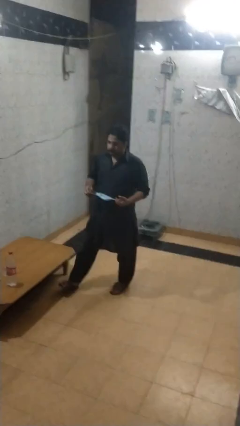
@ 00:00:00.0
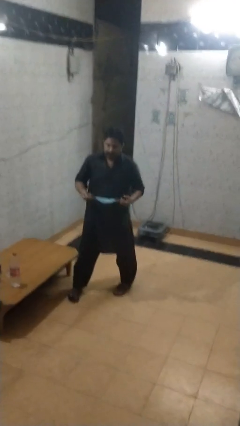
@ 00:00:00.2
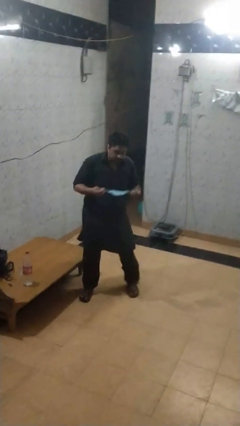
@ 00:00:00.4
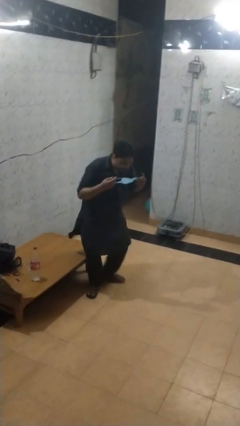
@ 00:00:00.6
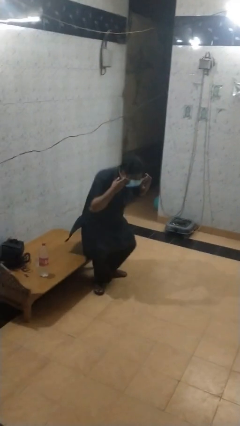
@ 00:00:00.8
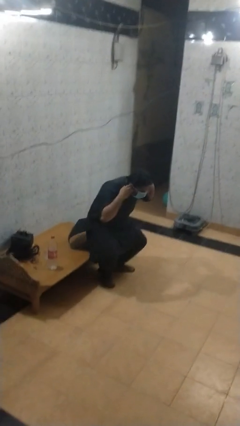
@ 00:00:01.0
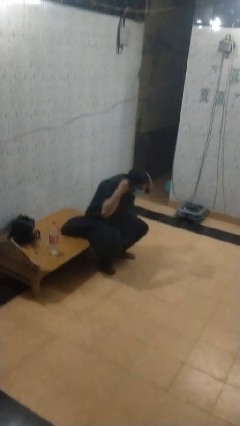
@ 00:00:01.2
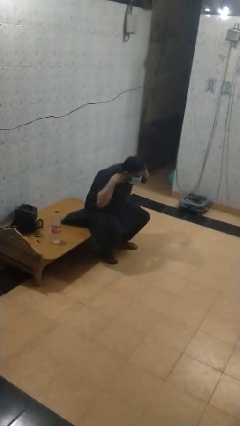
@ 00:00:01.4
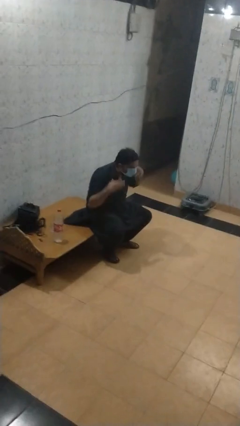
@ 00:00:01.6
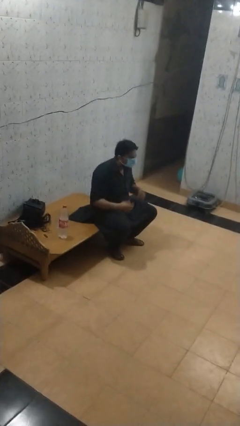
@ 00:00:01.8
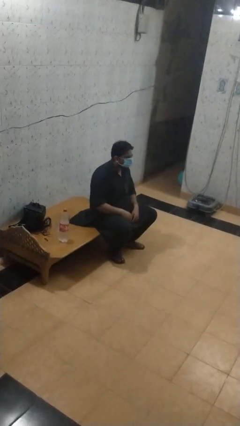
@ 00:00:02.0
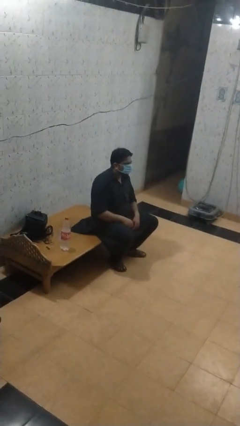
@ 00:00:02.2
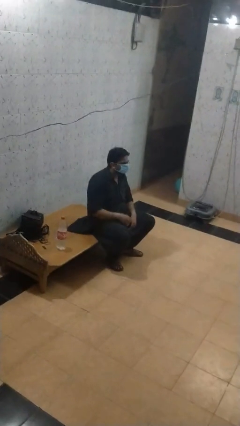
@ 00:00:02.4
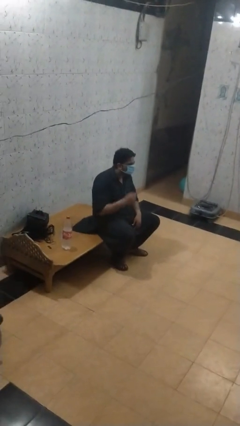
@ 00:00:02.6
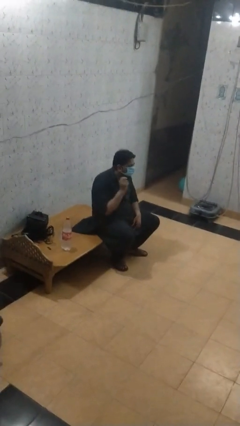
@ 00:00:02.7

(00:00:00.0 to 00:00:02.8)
person puts on facemask

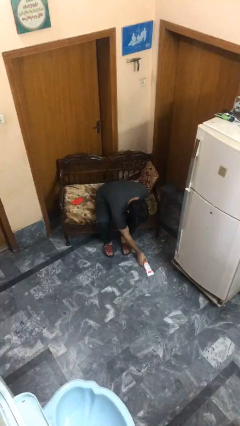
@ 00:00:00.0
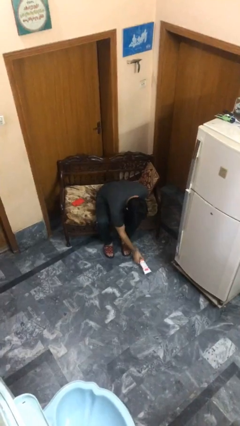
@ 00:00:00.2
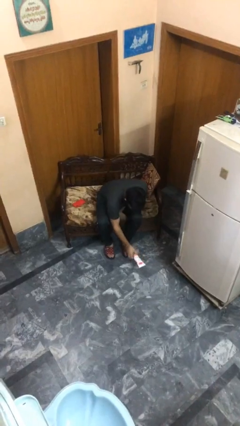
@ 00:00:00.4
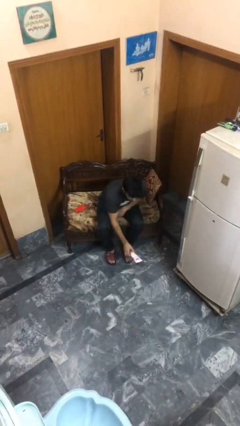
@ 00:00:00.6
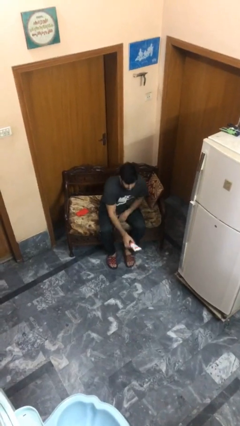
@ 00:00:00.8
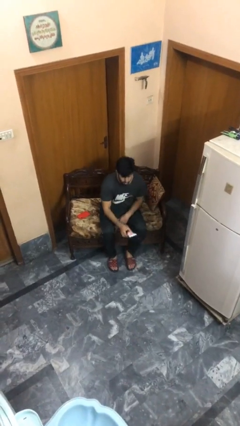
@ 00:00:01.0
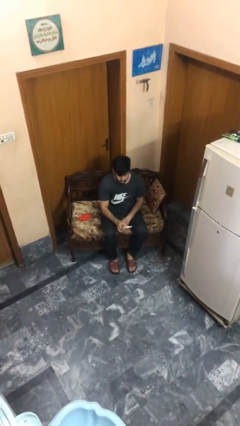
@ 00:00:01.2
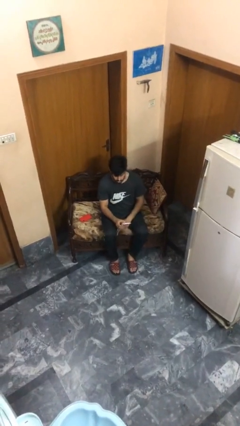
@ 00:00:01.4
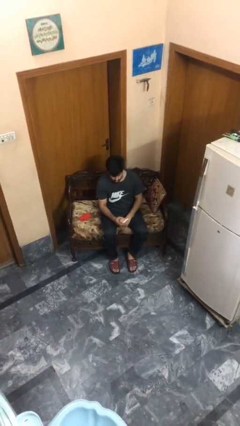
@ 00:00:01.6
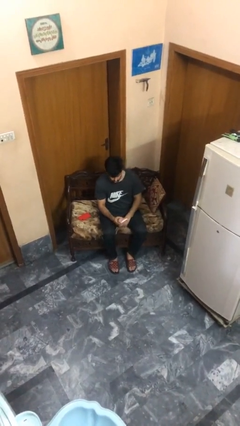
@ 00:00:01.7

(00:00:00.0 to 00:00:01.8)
person picks up object from floor

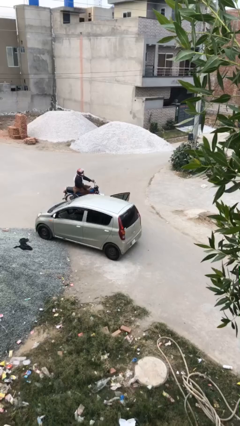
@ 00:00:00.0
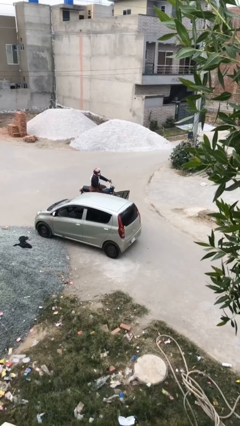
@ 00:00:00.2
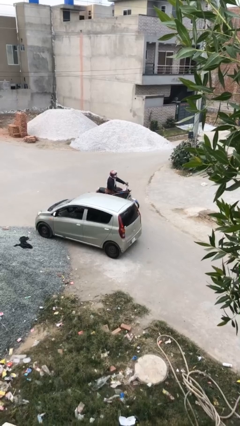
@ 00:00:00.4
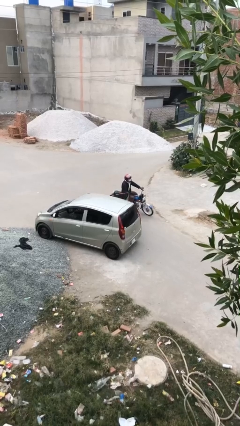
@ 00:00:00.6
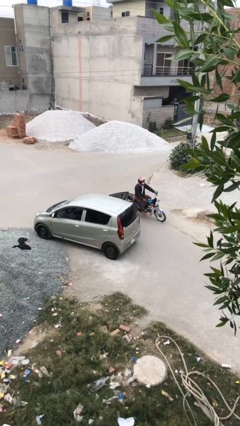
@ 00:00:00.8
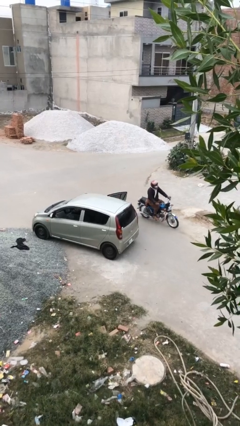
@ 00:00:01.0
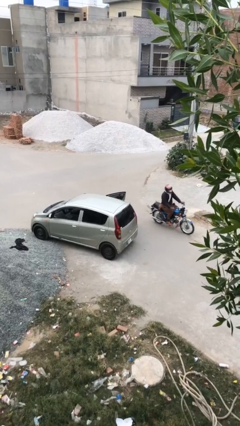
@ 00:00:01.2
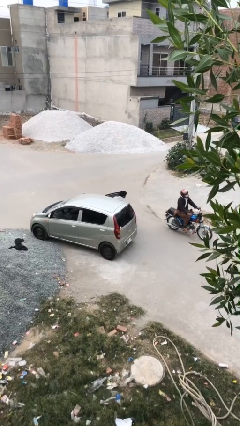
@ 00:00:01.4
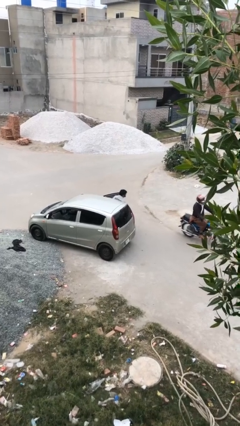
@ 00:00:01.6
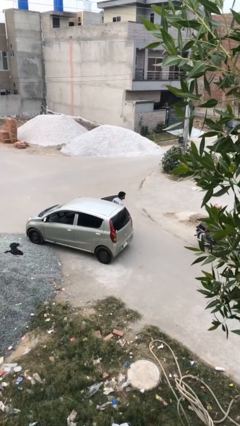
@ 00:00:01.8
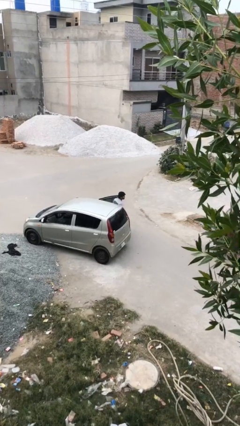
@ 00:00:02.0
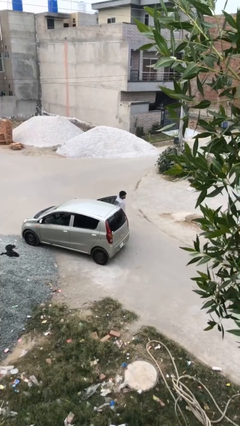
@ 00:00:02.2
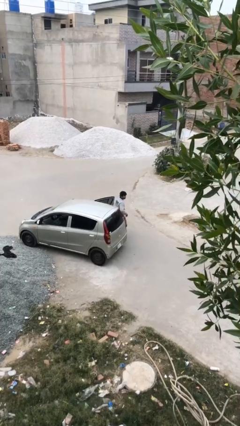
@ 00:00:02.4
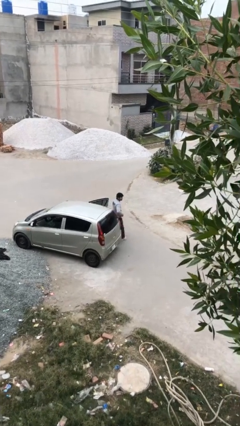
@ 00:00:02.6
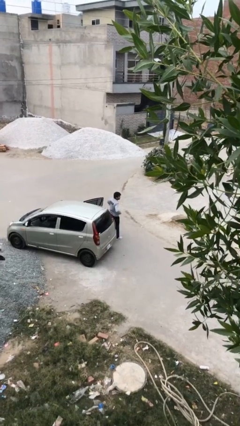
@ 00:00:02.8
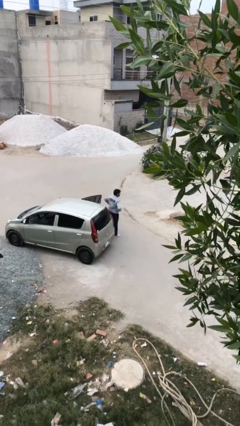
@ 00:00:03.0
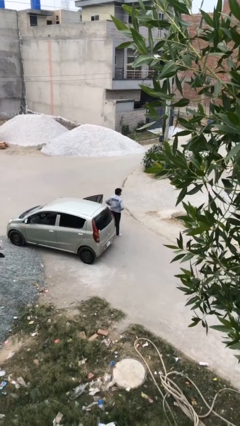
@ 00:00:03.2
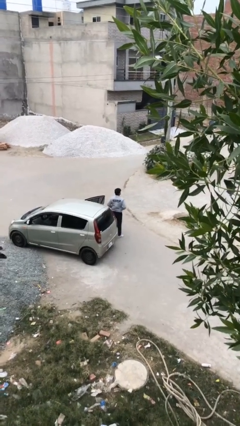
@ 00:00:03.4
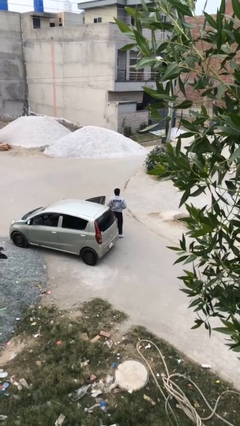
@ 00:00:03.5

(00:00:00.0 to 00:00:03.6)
person exits car

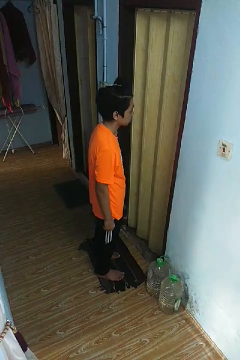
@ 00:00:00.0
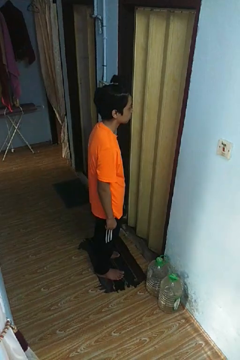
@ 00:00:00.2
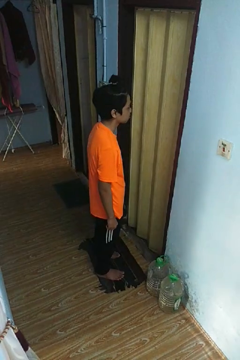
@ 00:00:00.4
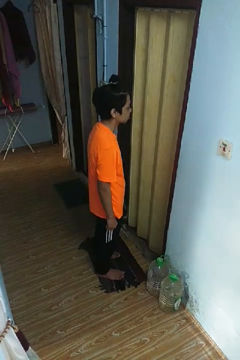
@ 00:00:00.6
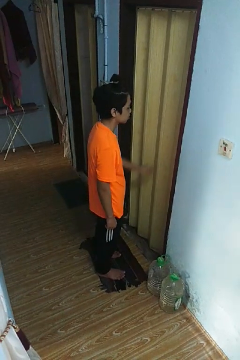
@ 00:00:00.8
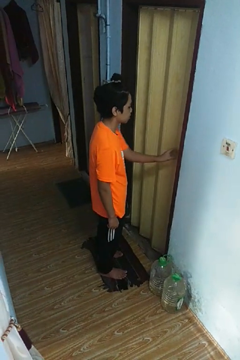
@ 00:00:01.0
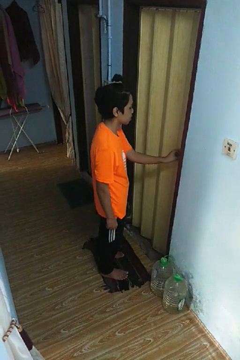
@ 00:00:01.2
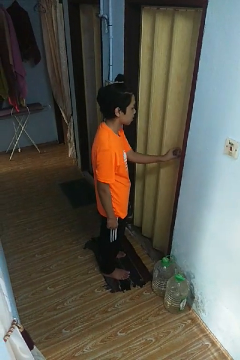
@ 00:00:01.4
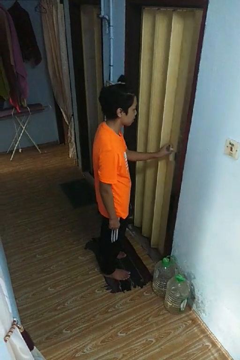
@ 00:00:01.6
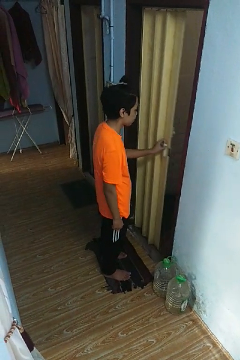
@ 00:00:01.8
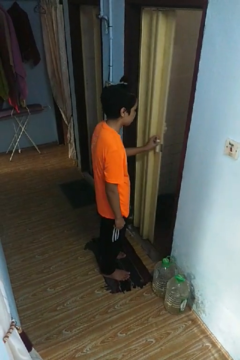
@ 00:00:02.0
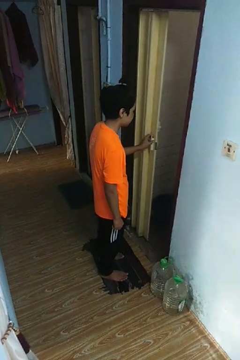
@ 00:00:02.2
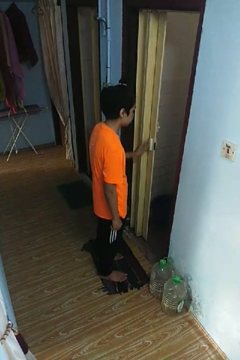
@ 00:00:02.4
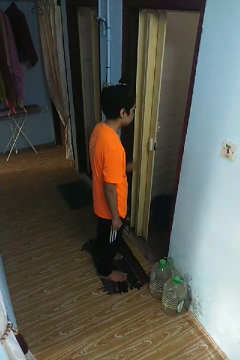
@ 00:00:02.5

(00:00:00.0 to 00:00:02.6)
person opens sliding door

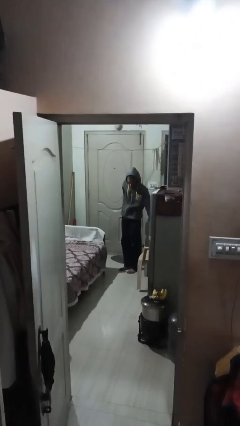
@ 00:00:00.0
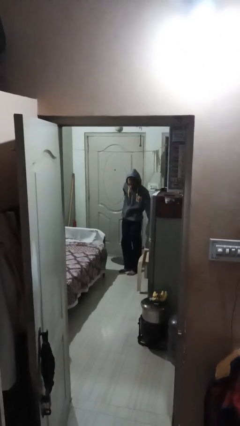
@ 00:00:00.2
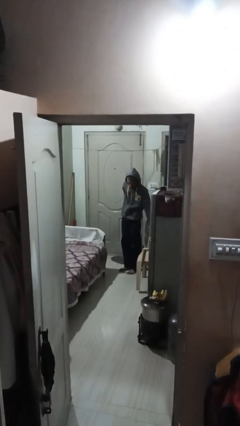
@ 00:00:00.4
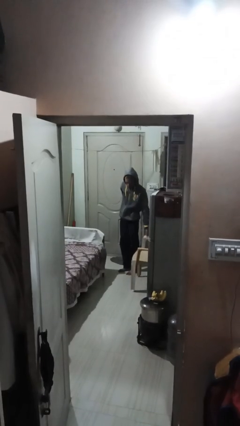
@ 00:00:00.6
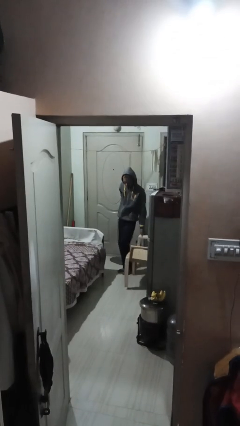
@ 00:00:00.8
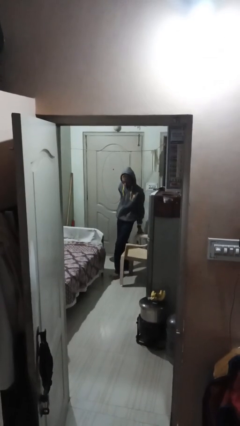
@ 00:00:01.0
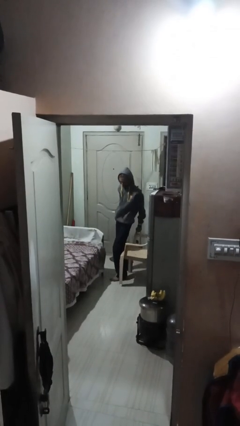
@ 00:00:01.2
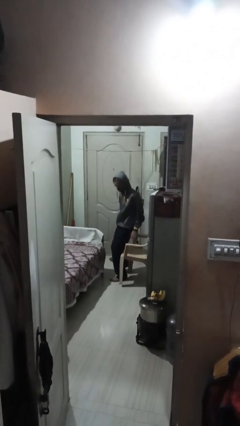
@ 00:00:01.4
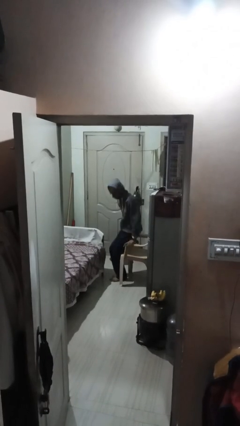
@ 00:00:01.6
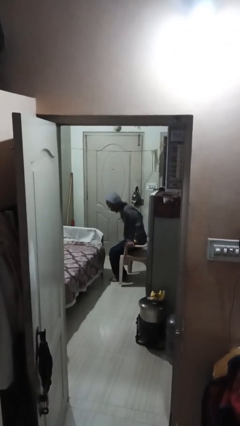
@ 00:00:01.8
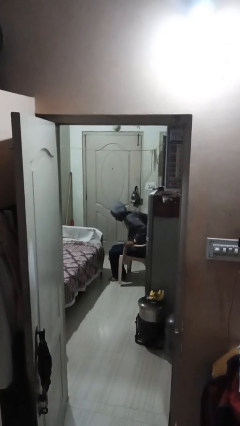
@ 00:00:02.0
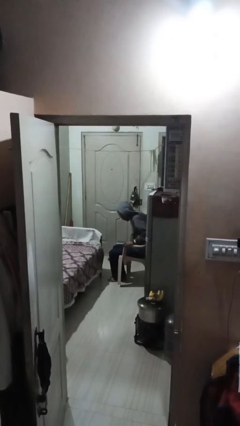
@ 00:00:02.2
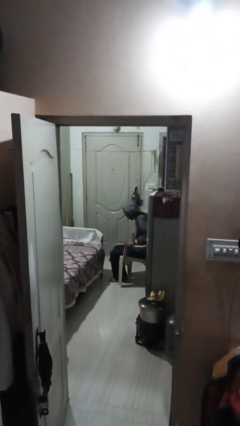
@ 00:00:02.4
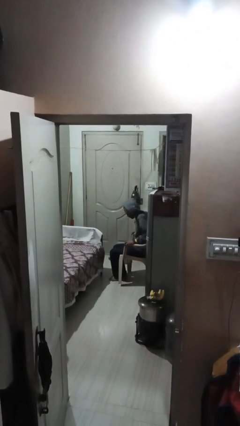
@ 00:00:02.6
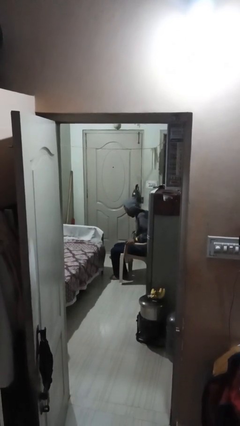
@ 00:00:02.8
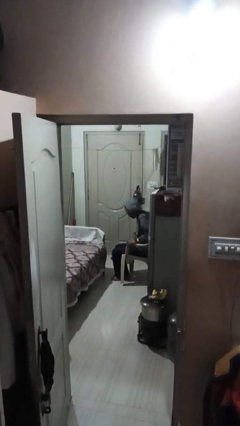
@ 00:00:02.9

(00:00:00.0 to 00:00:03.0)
person sits down

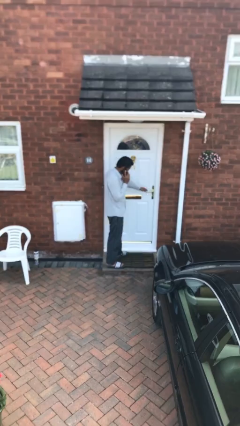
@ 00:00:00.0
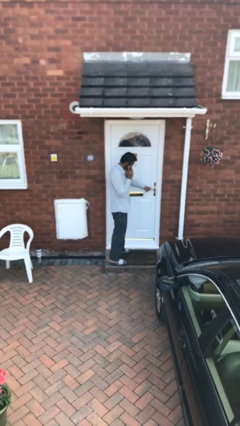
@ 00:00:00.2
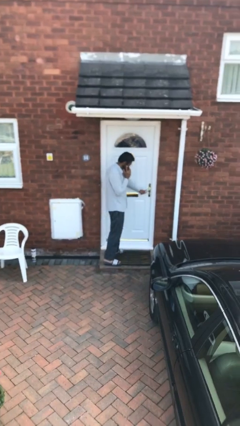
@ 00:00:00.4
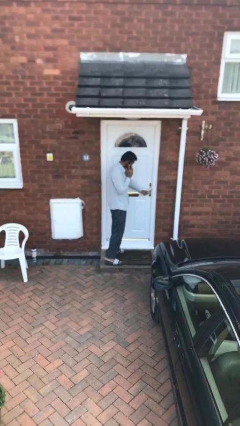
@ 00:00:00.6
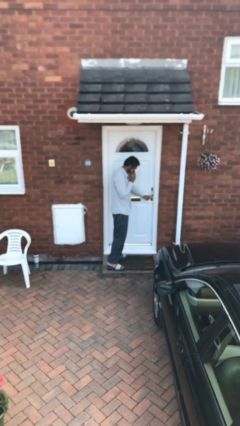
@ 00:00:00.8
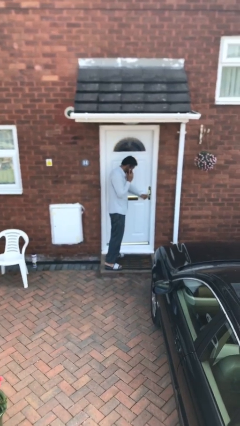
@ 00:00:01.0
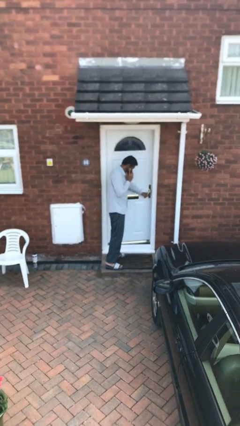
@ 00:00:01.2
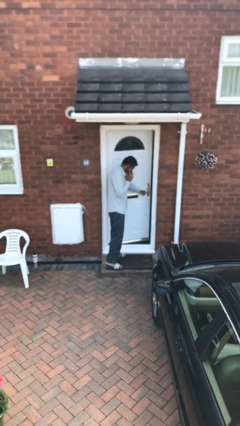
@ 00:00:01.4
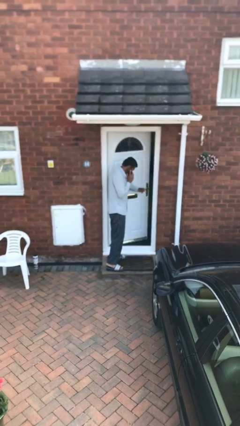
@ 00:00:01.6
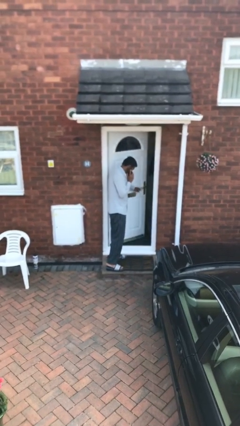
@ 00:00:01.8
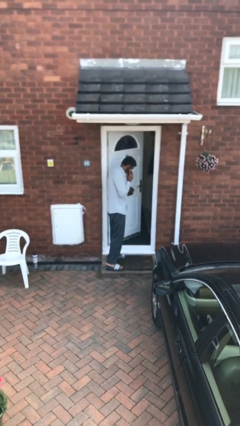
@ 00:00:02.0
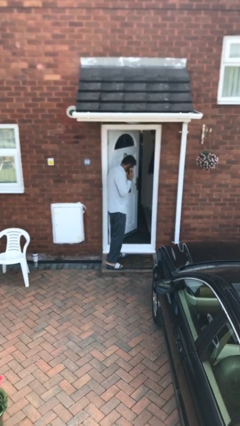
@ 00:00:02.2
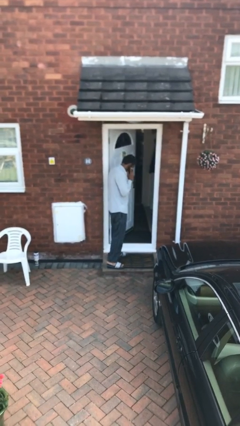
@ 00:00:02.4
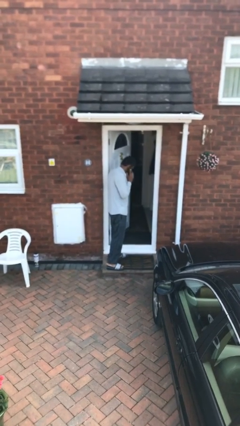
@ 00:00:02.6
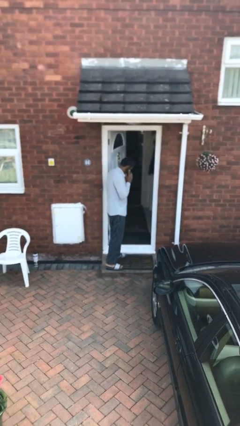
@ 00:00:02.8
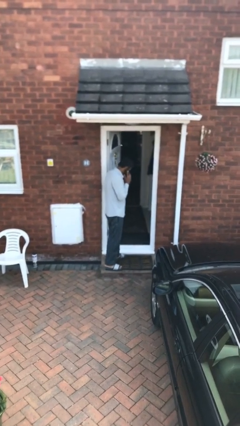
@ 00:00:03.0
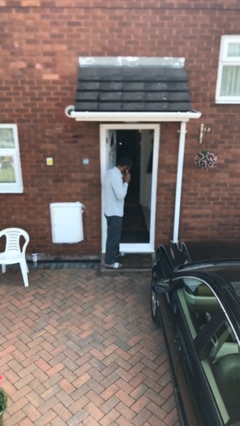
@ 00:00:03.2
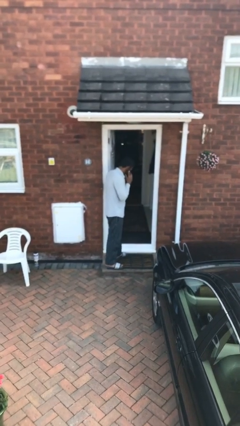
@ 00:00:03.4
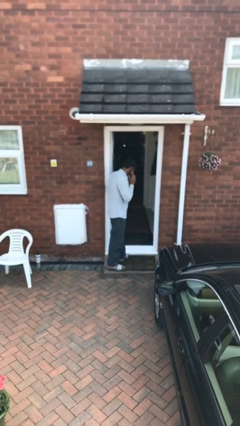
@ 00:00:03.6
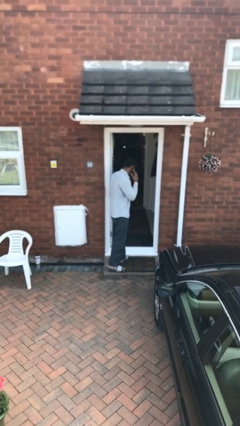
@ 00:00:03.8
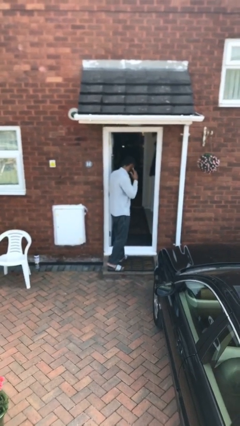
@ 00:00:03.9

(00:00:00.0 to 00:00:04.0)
person opens facility door
